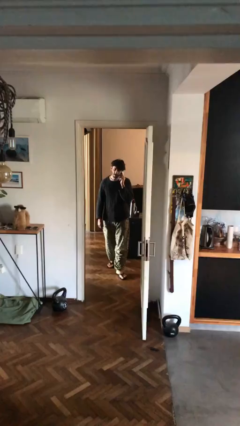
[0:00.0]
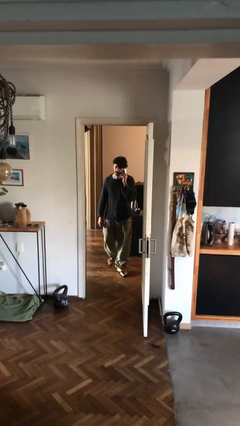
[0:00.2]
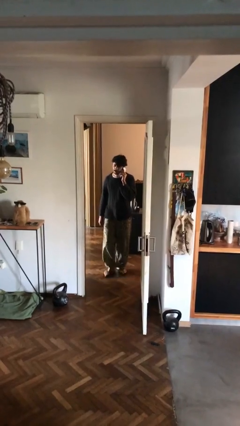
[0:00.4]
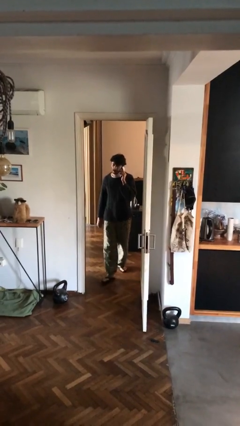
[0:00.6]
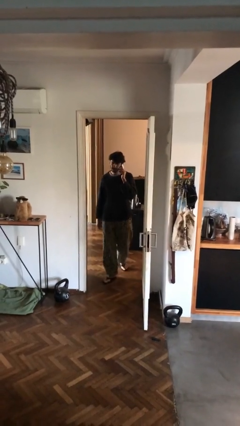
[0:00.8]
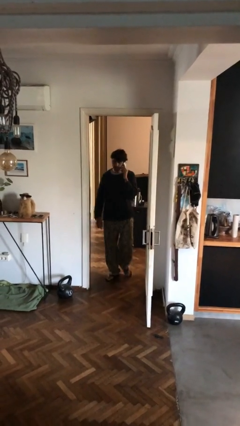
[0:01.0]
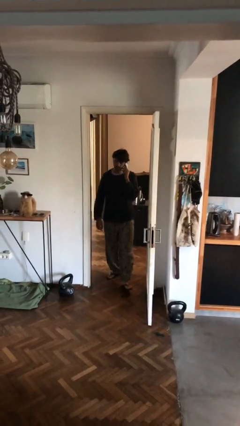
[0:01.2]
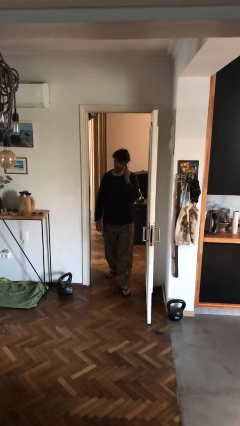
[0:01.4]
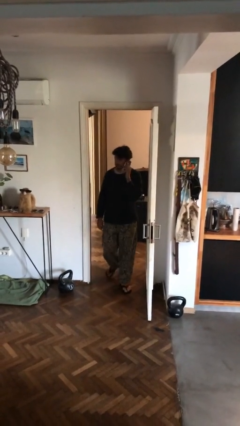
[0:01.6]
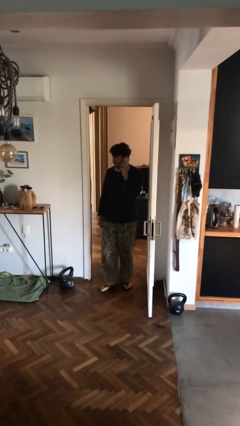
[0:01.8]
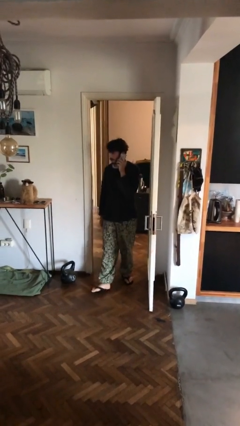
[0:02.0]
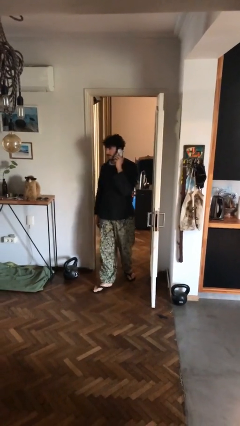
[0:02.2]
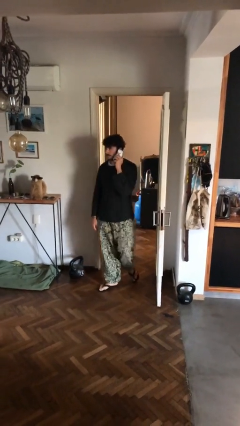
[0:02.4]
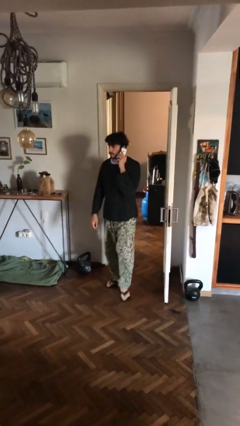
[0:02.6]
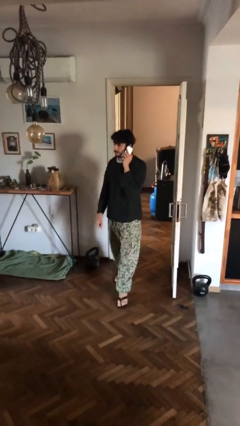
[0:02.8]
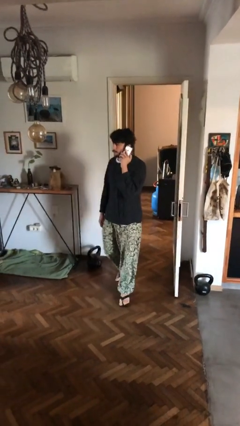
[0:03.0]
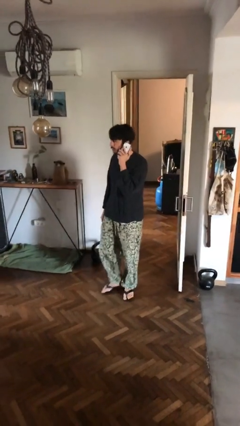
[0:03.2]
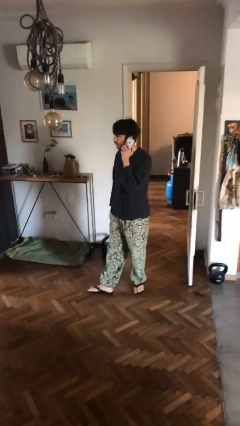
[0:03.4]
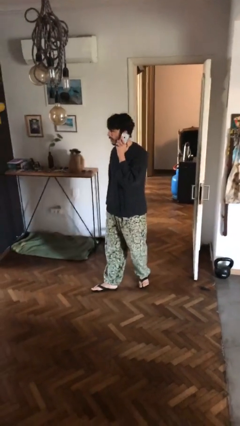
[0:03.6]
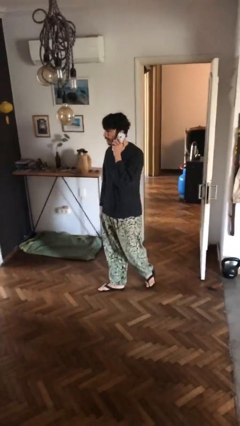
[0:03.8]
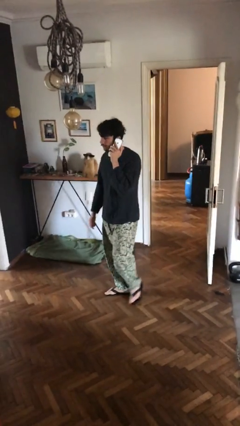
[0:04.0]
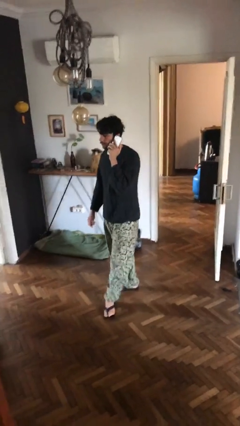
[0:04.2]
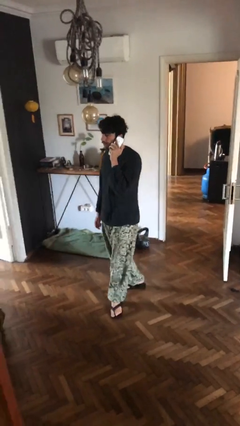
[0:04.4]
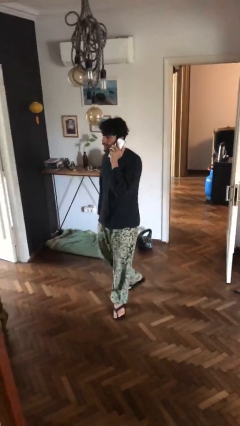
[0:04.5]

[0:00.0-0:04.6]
person enters scene through structure

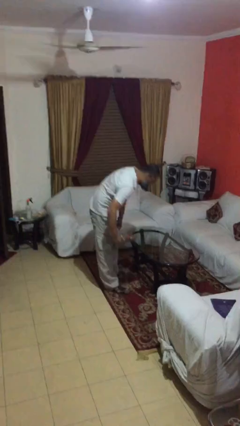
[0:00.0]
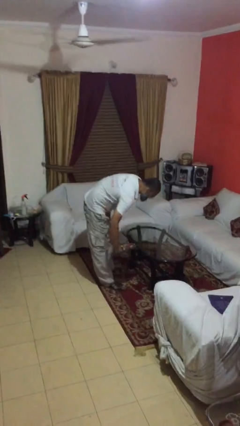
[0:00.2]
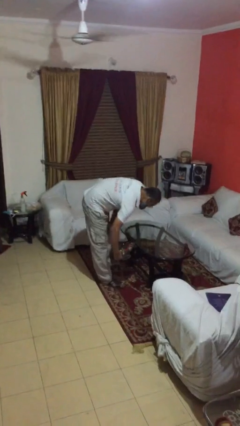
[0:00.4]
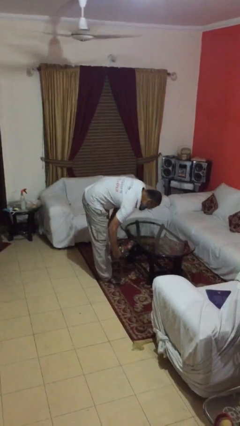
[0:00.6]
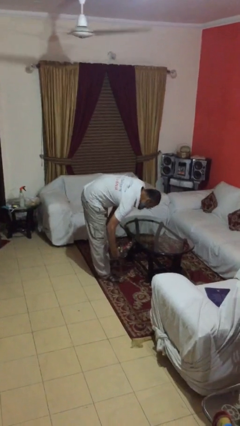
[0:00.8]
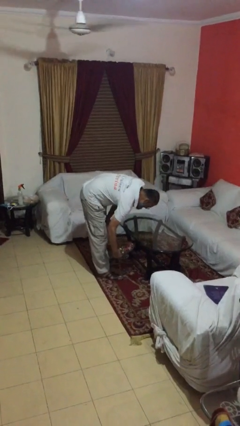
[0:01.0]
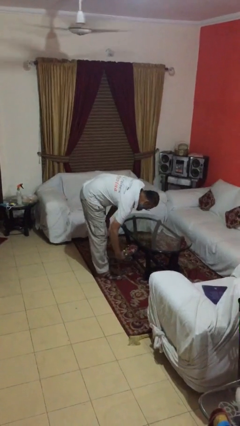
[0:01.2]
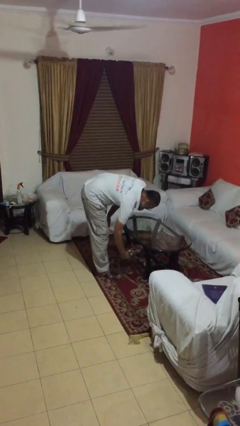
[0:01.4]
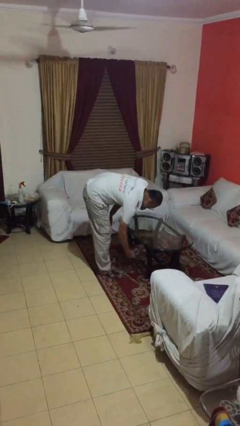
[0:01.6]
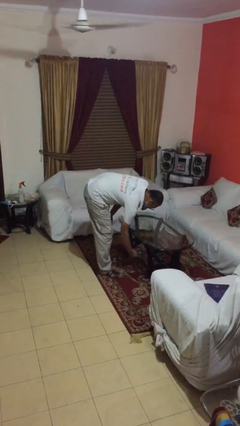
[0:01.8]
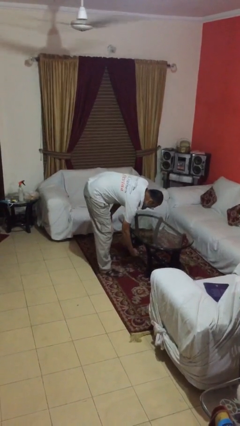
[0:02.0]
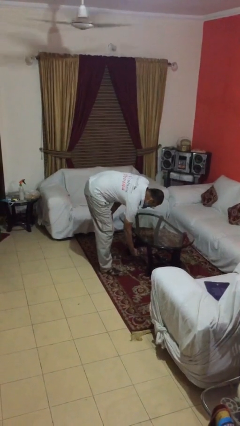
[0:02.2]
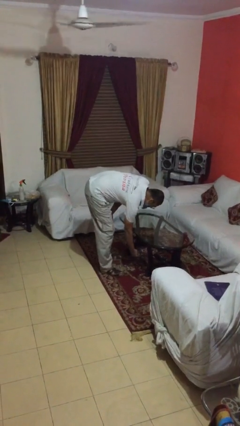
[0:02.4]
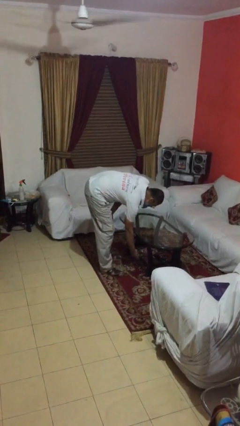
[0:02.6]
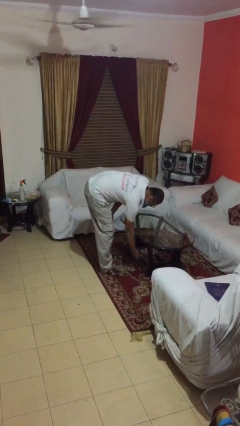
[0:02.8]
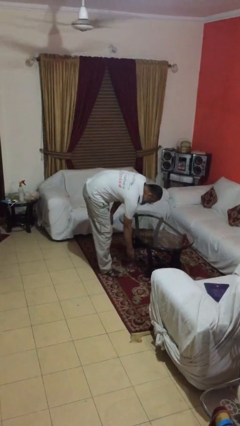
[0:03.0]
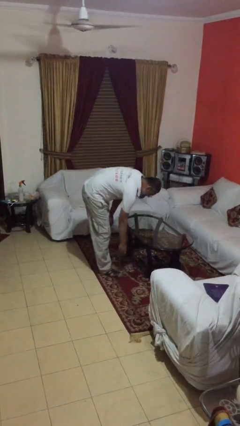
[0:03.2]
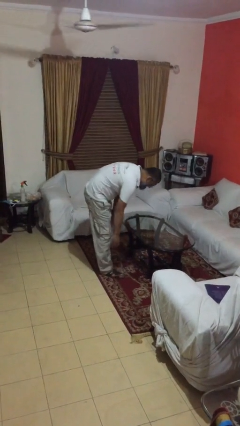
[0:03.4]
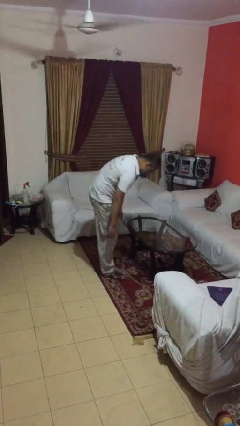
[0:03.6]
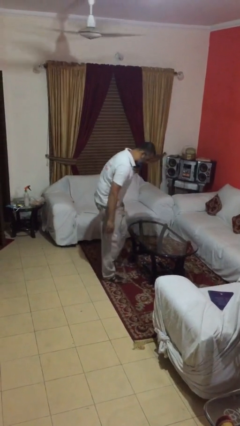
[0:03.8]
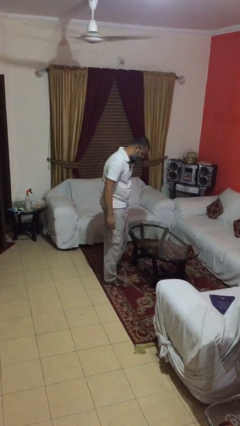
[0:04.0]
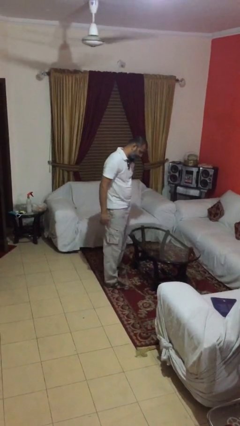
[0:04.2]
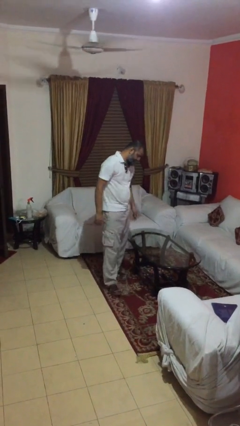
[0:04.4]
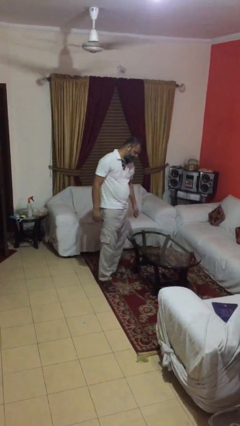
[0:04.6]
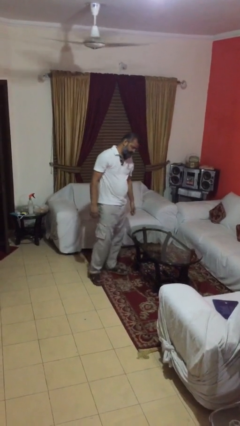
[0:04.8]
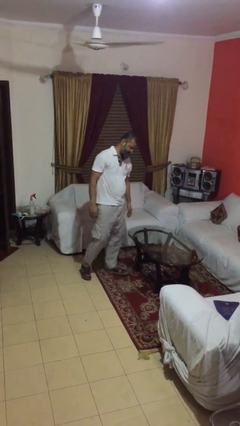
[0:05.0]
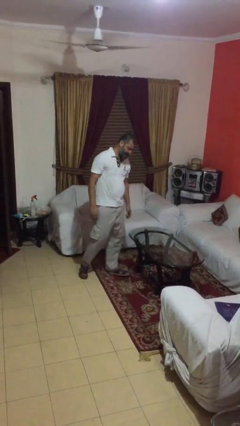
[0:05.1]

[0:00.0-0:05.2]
person puts down object on table

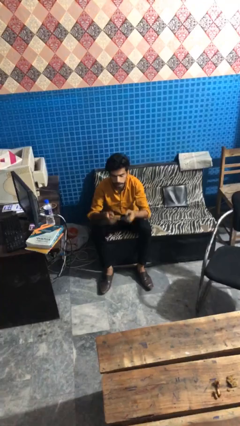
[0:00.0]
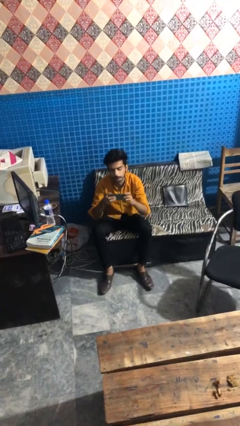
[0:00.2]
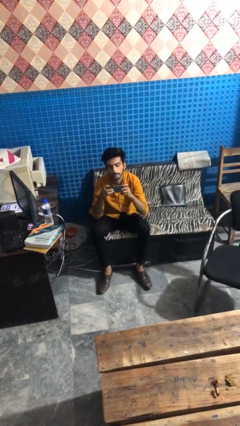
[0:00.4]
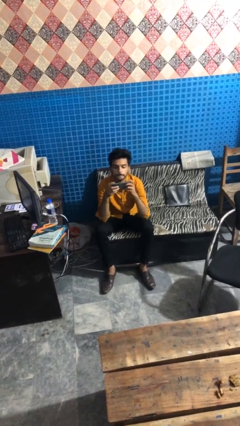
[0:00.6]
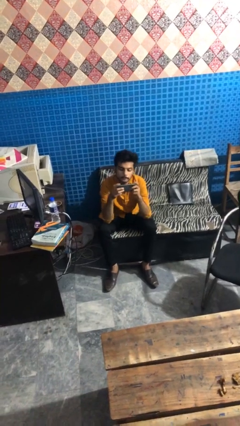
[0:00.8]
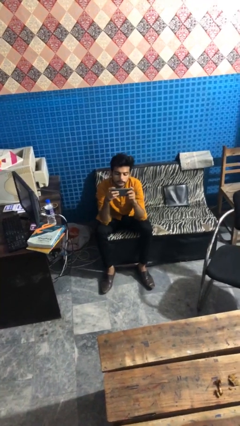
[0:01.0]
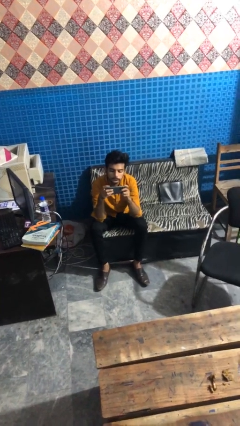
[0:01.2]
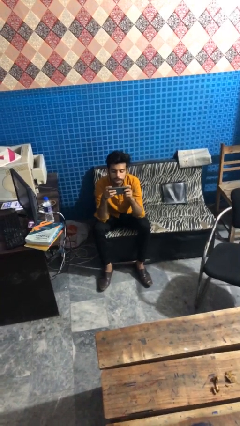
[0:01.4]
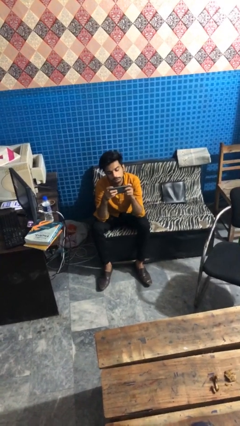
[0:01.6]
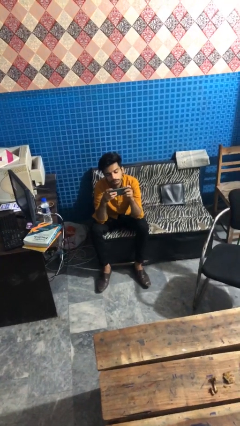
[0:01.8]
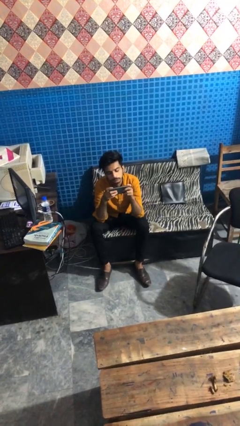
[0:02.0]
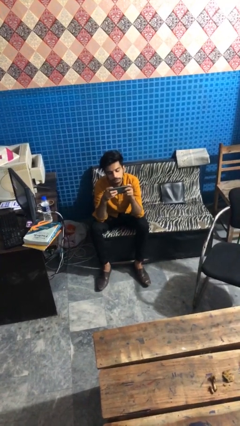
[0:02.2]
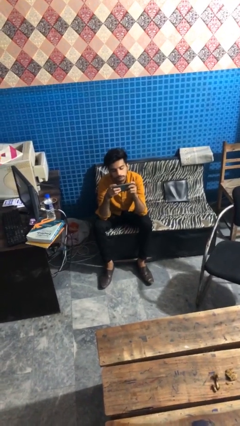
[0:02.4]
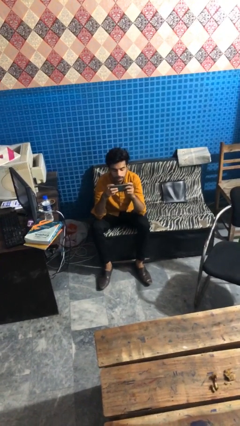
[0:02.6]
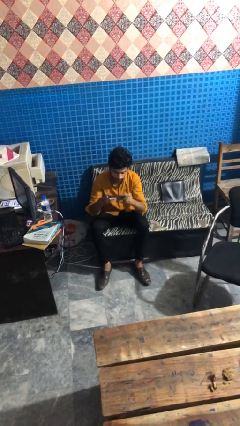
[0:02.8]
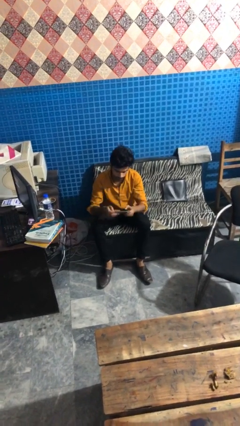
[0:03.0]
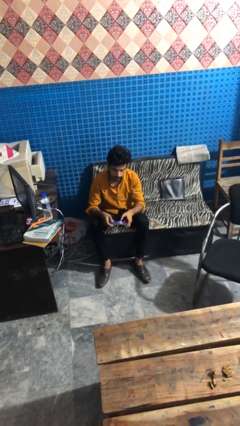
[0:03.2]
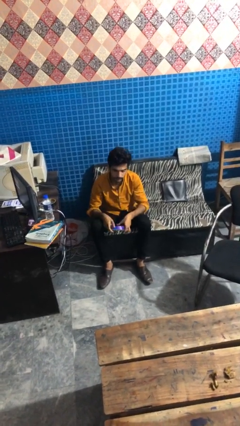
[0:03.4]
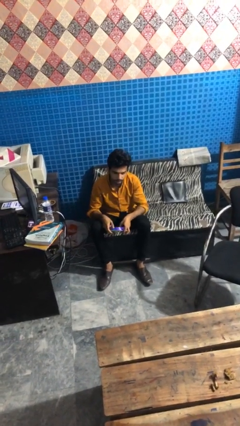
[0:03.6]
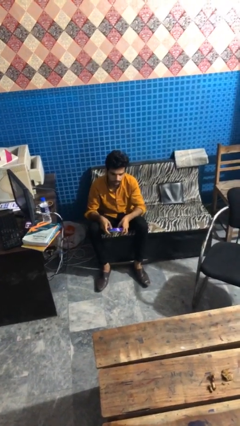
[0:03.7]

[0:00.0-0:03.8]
person interacts with handheld game

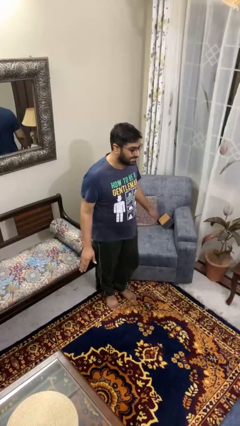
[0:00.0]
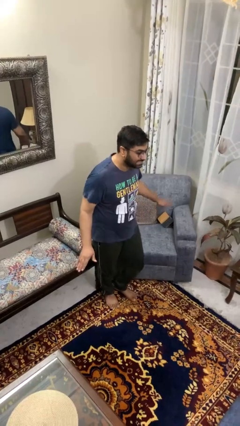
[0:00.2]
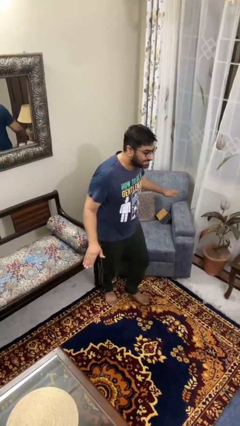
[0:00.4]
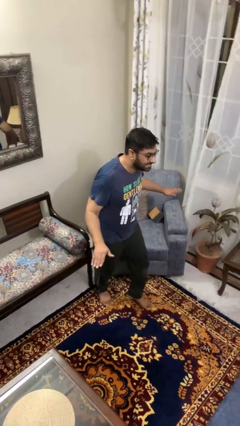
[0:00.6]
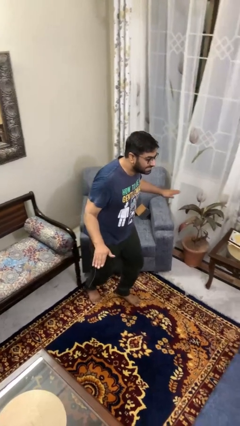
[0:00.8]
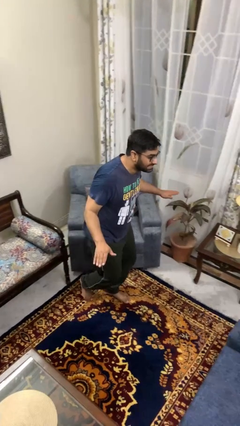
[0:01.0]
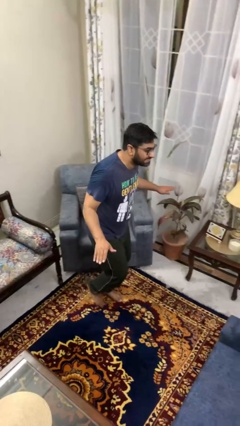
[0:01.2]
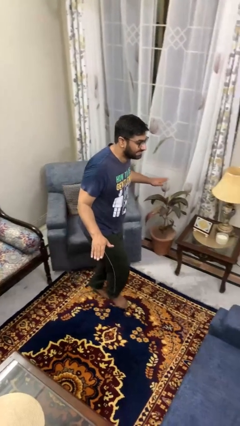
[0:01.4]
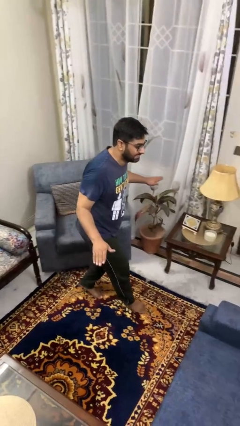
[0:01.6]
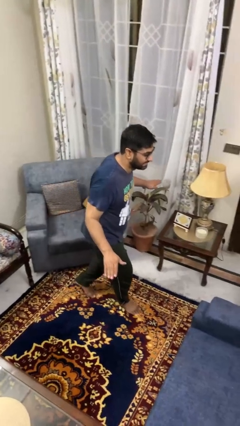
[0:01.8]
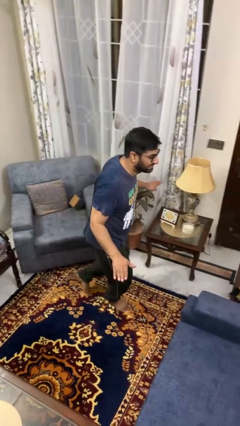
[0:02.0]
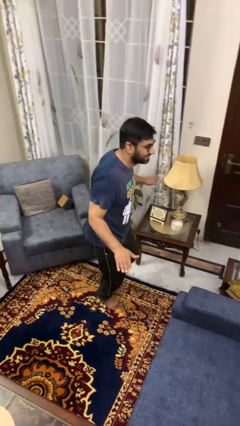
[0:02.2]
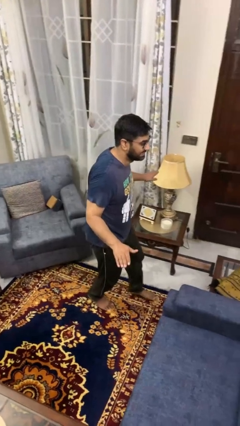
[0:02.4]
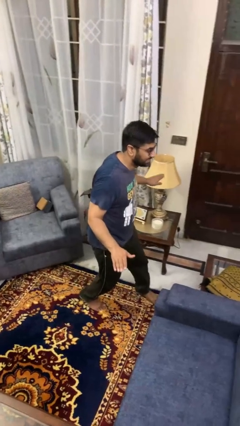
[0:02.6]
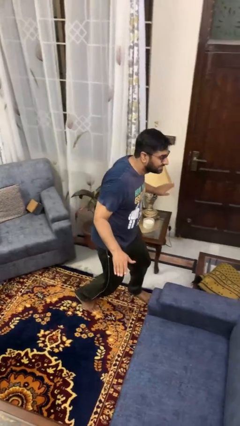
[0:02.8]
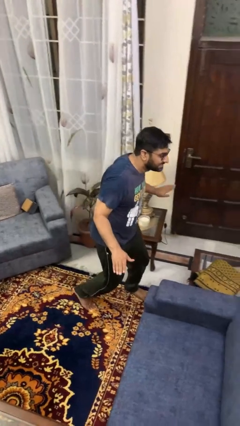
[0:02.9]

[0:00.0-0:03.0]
person walks tiptoe

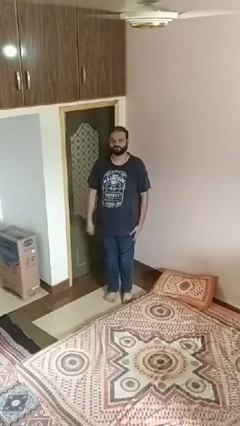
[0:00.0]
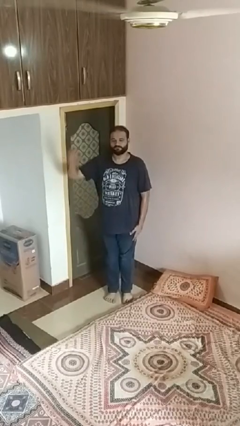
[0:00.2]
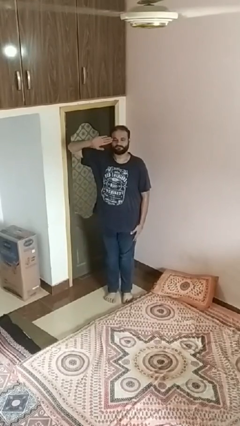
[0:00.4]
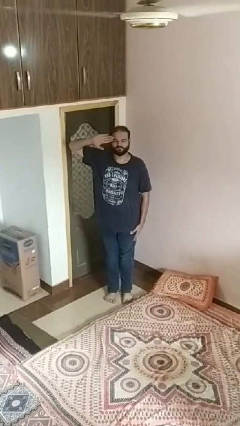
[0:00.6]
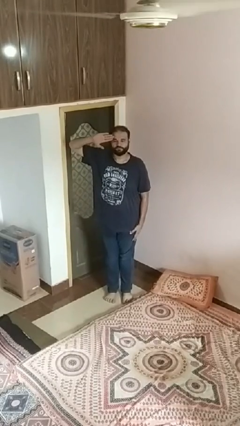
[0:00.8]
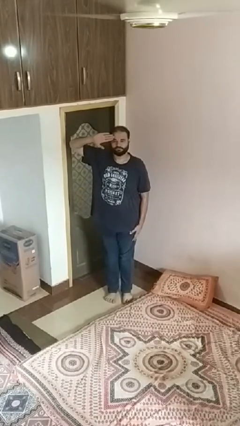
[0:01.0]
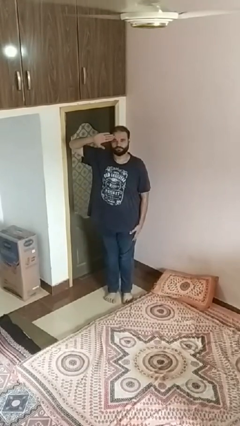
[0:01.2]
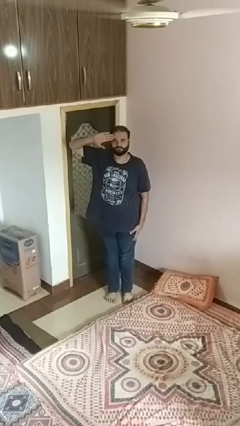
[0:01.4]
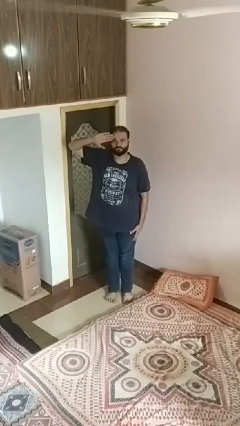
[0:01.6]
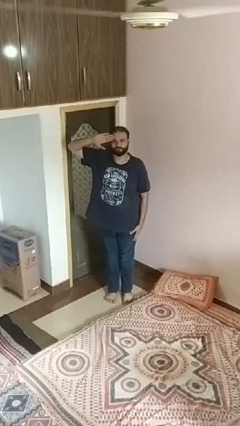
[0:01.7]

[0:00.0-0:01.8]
person salutes
